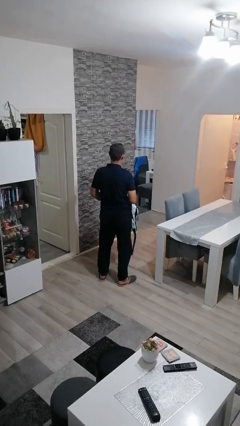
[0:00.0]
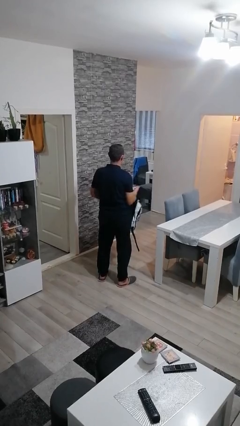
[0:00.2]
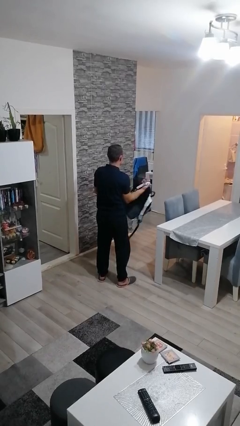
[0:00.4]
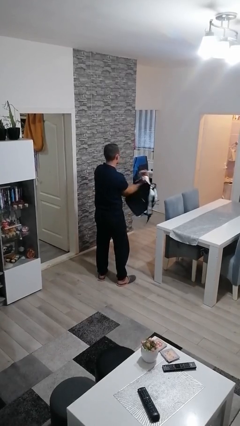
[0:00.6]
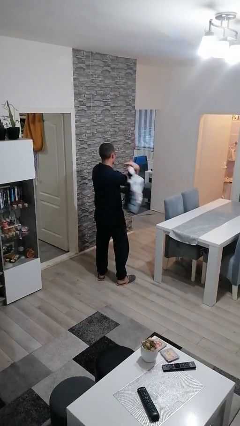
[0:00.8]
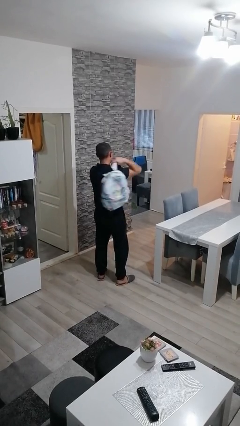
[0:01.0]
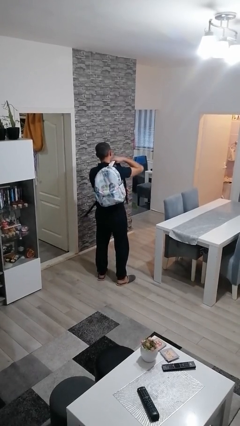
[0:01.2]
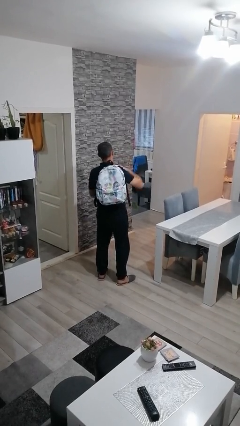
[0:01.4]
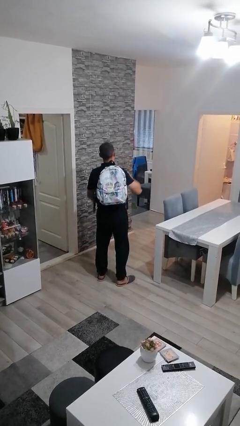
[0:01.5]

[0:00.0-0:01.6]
person puts on backpack

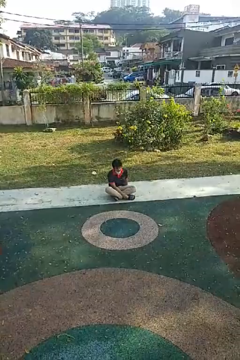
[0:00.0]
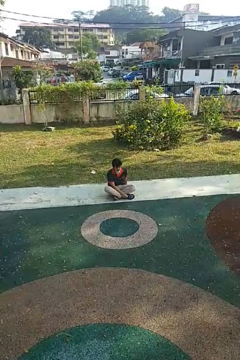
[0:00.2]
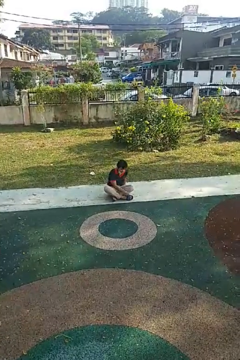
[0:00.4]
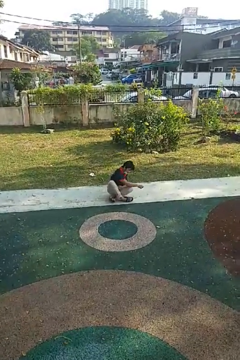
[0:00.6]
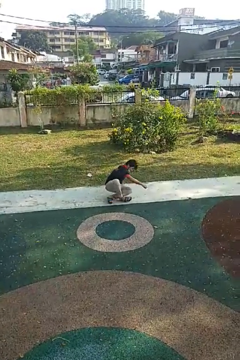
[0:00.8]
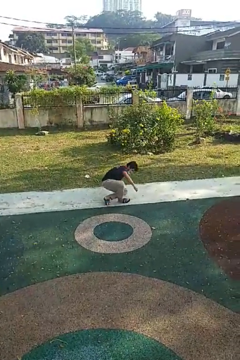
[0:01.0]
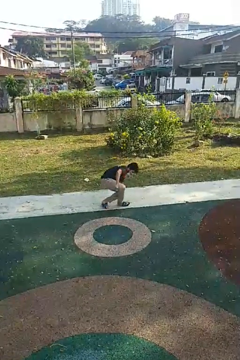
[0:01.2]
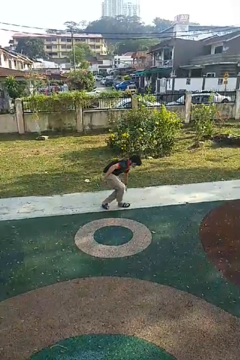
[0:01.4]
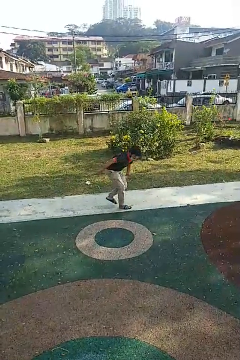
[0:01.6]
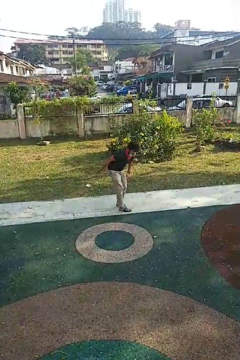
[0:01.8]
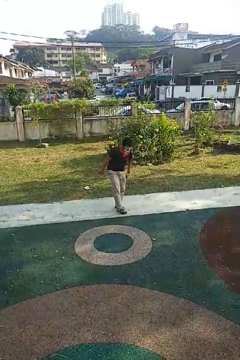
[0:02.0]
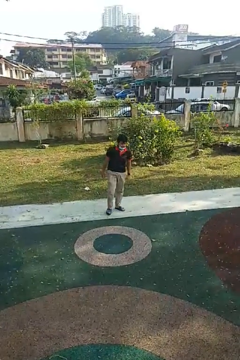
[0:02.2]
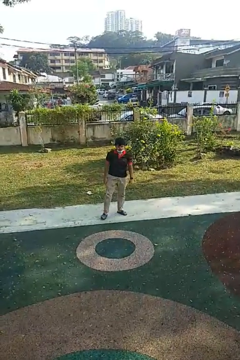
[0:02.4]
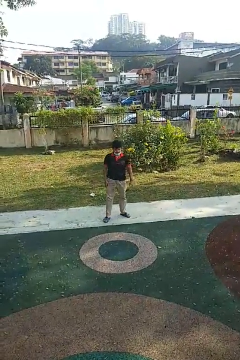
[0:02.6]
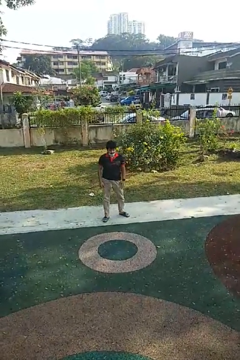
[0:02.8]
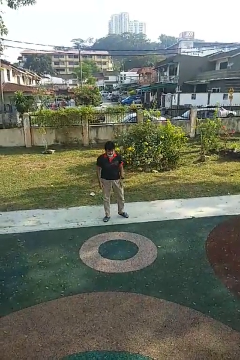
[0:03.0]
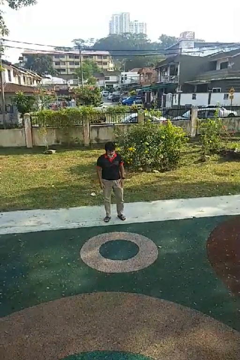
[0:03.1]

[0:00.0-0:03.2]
person stands up from floor

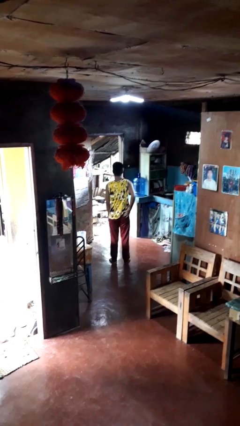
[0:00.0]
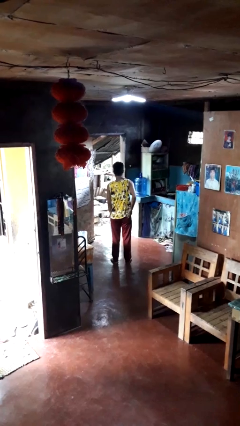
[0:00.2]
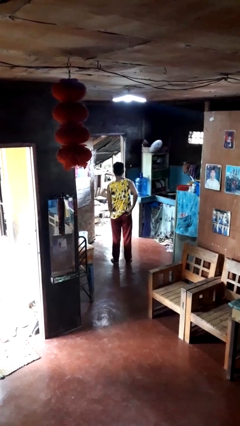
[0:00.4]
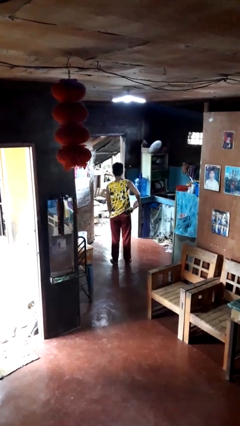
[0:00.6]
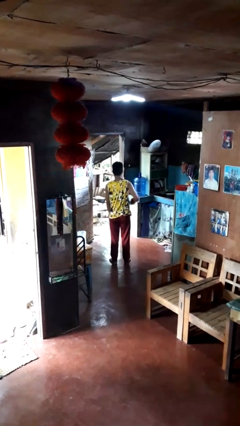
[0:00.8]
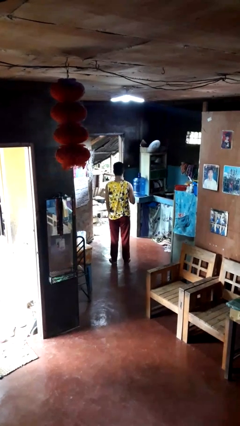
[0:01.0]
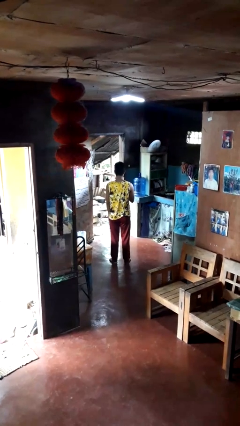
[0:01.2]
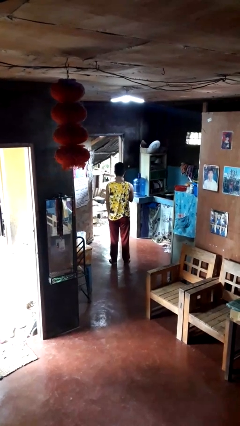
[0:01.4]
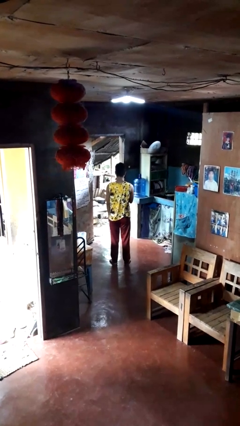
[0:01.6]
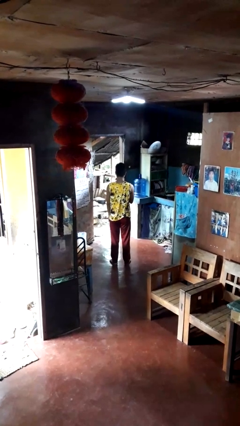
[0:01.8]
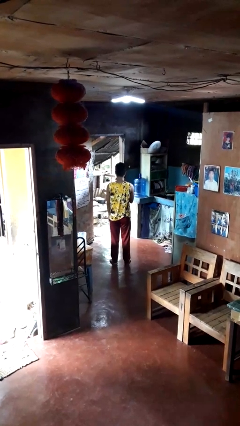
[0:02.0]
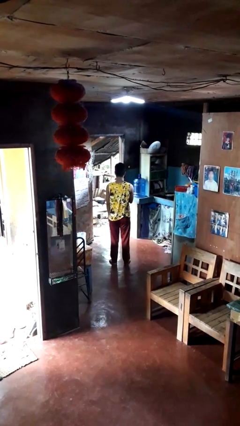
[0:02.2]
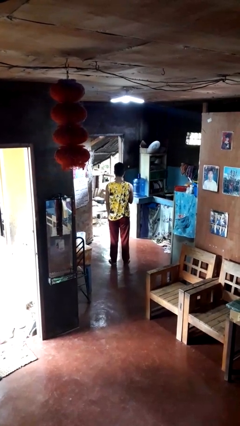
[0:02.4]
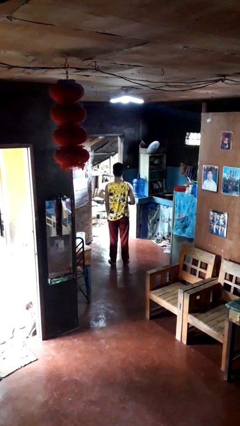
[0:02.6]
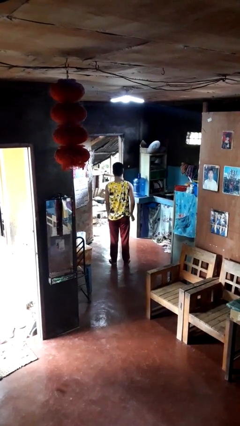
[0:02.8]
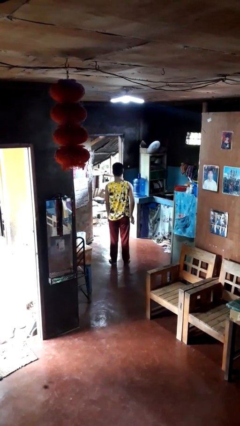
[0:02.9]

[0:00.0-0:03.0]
person takes phone from pocket

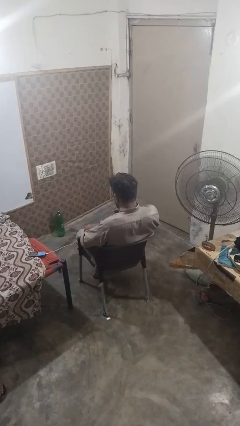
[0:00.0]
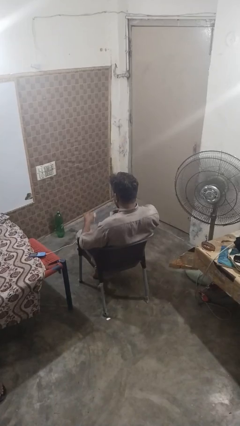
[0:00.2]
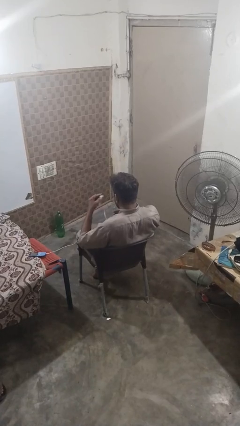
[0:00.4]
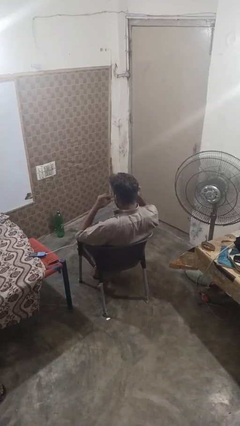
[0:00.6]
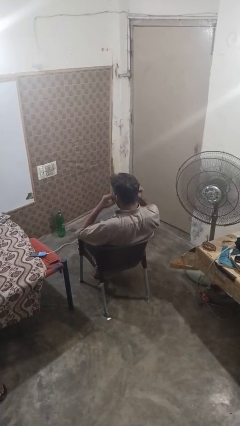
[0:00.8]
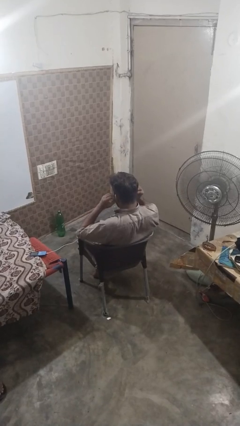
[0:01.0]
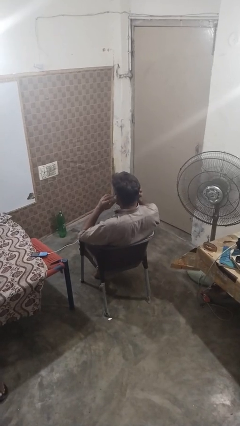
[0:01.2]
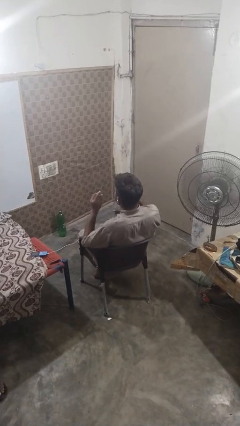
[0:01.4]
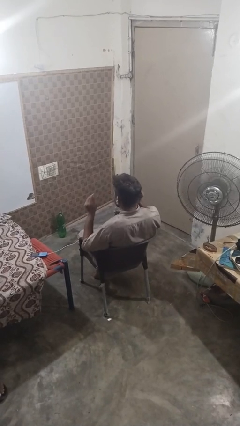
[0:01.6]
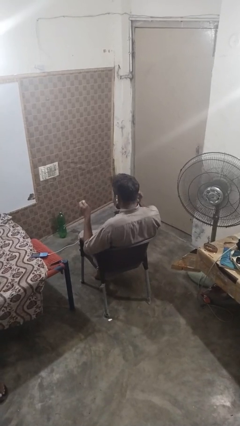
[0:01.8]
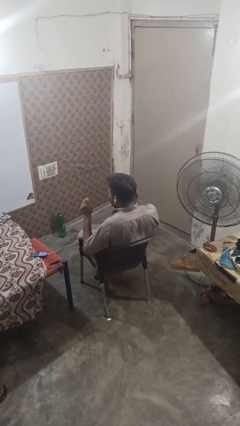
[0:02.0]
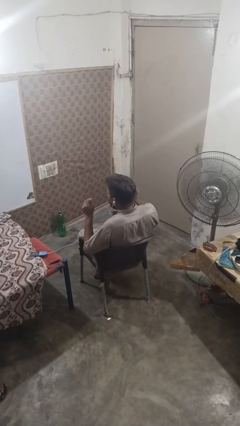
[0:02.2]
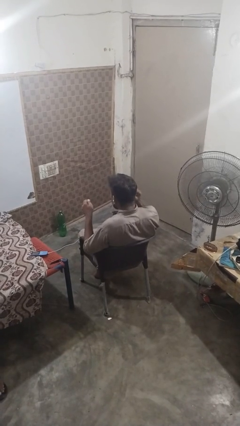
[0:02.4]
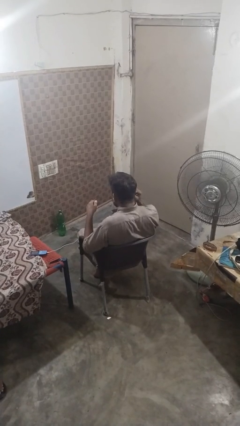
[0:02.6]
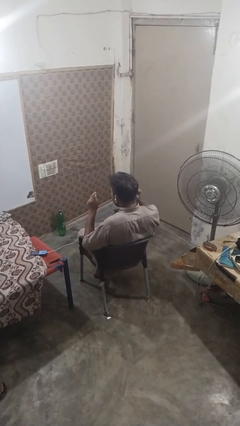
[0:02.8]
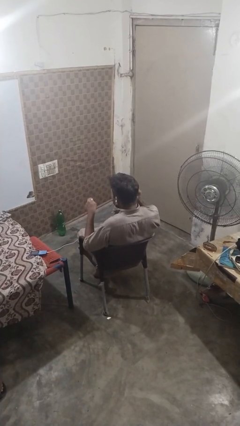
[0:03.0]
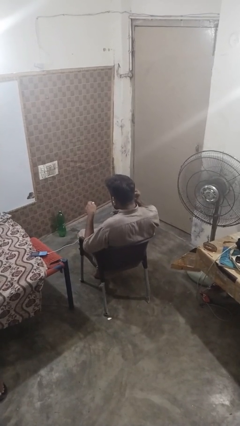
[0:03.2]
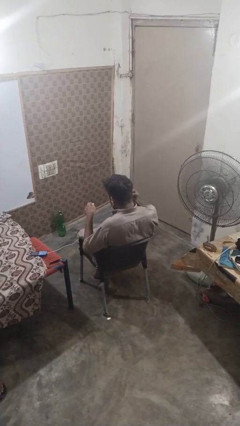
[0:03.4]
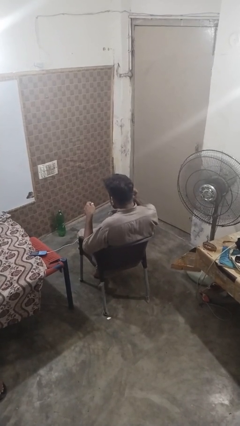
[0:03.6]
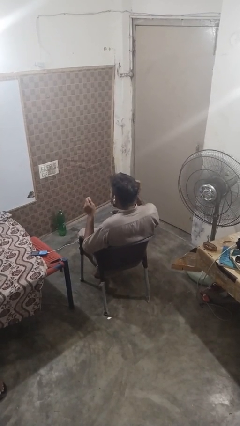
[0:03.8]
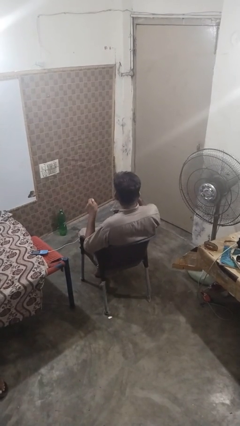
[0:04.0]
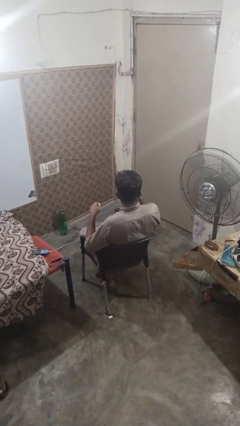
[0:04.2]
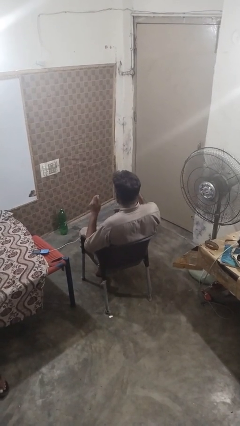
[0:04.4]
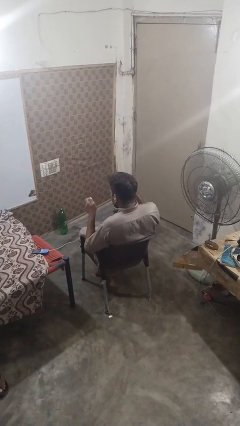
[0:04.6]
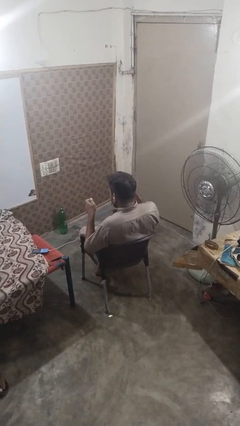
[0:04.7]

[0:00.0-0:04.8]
person puts on headphones

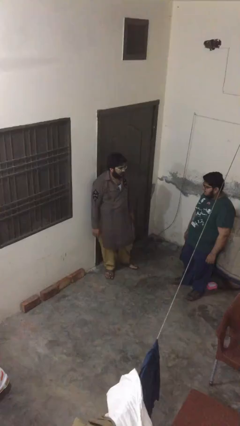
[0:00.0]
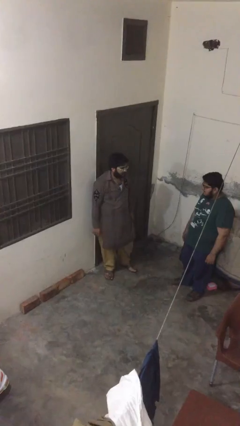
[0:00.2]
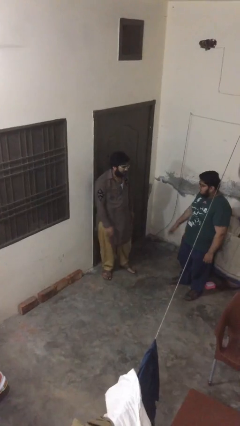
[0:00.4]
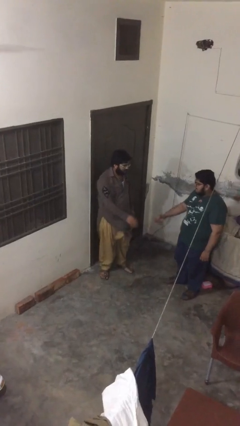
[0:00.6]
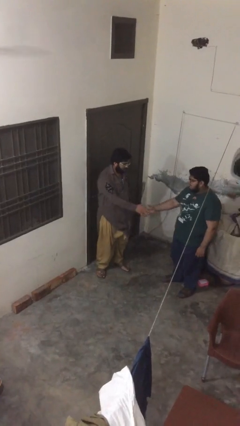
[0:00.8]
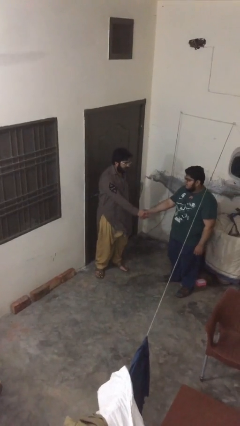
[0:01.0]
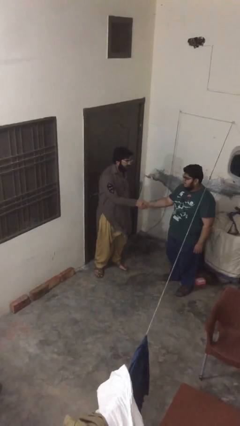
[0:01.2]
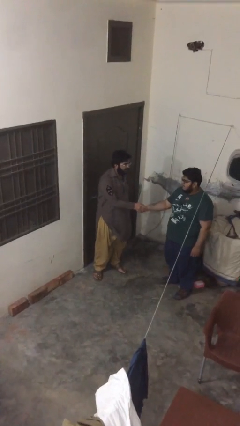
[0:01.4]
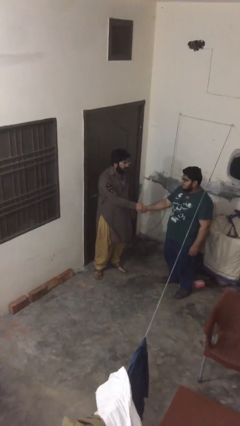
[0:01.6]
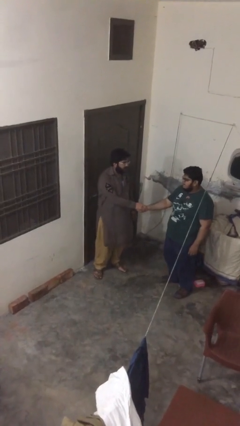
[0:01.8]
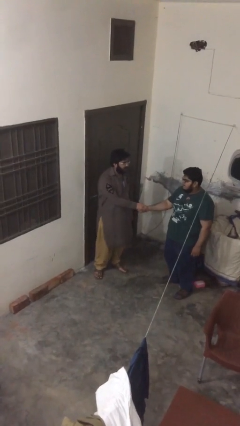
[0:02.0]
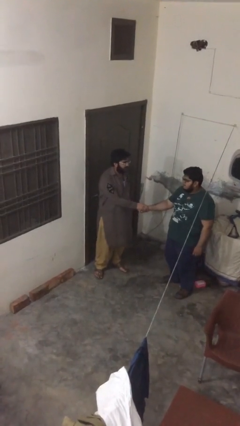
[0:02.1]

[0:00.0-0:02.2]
person shakes hand

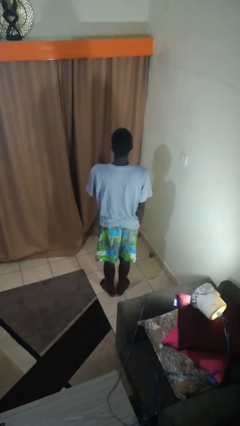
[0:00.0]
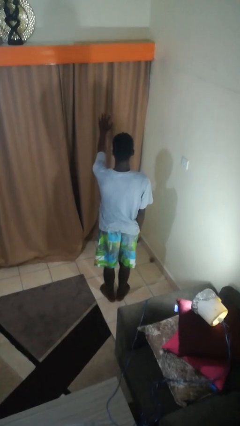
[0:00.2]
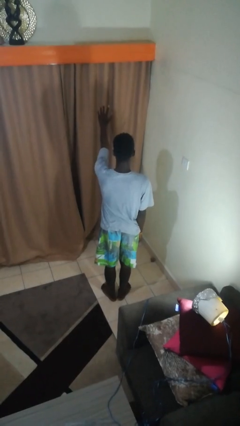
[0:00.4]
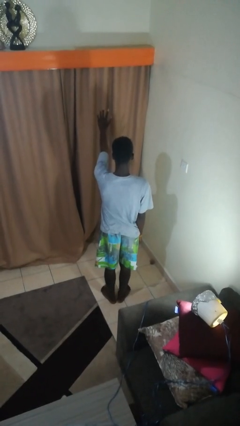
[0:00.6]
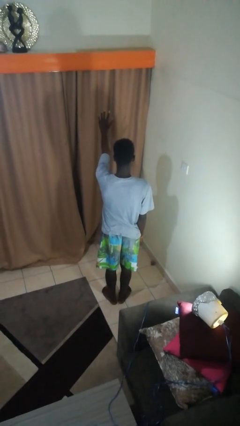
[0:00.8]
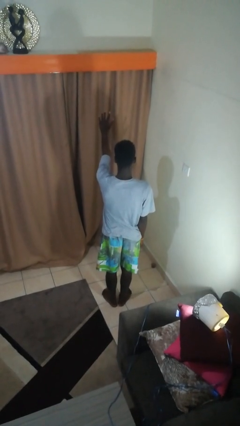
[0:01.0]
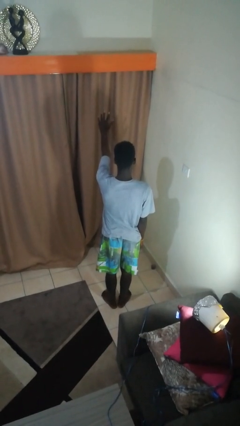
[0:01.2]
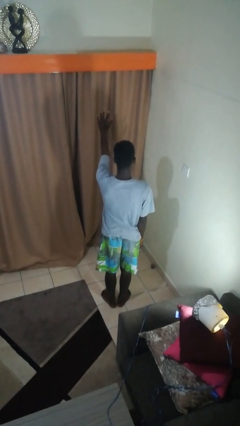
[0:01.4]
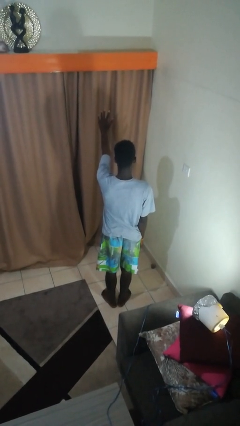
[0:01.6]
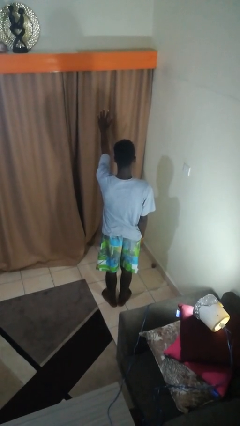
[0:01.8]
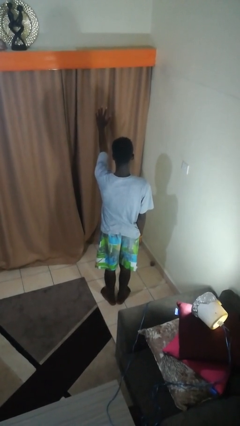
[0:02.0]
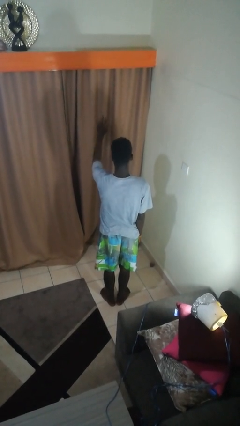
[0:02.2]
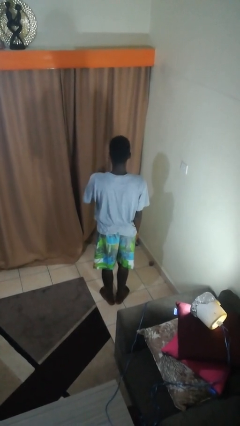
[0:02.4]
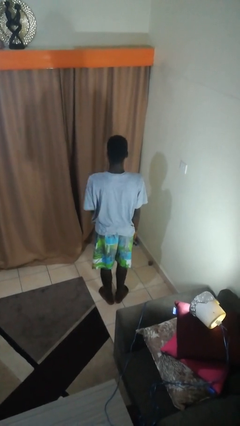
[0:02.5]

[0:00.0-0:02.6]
person gestures number five

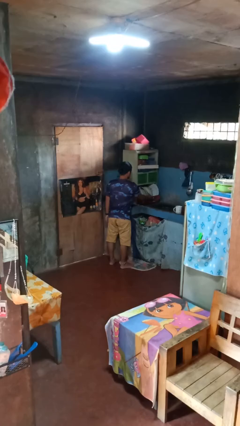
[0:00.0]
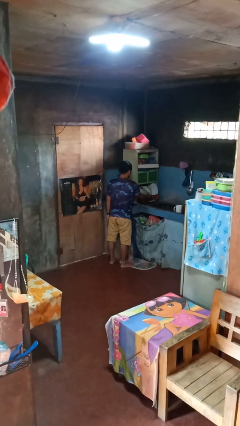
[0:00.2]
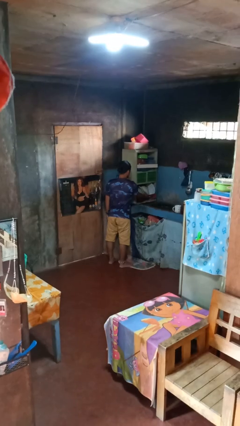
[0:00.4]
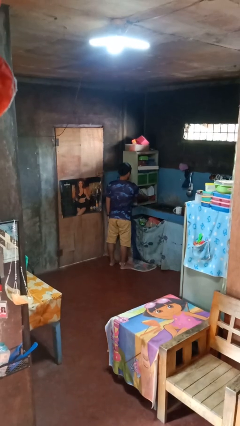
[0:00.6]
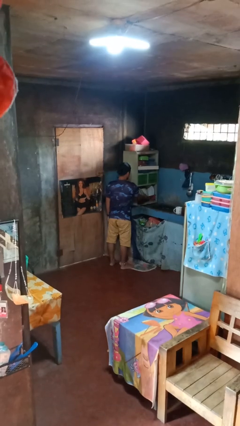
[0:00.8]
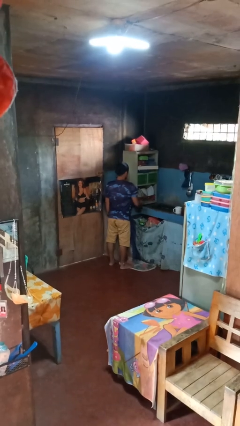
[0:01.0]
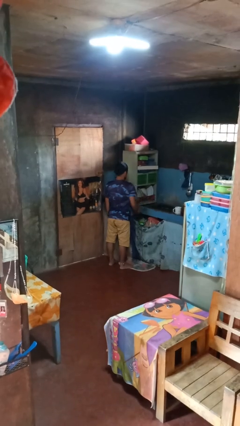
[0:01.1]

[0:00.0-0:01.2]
person closes dishwasher
